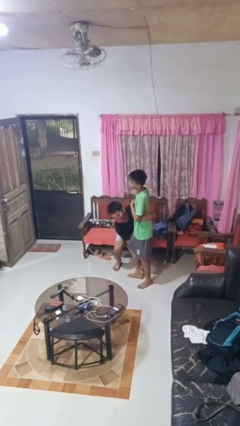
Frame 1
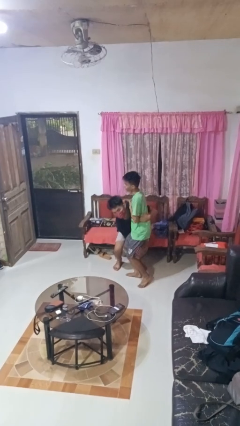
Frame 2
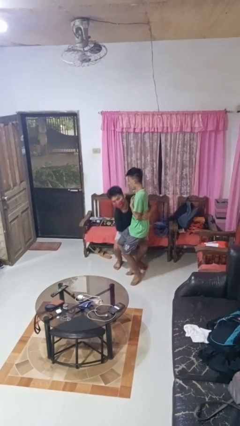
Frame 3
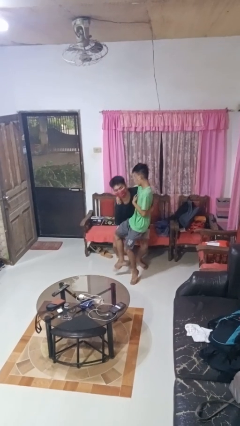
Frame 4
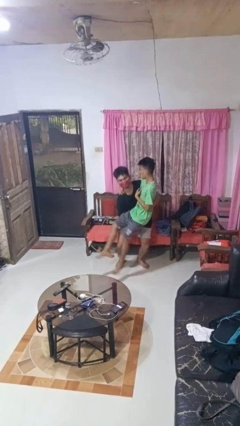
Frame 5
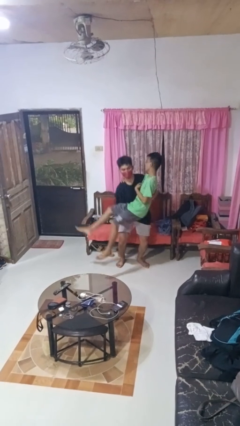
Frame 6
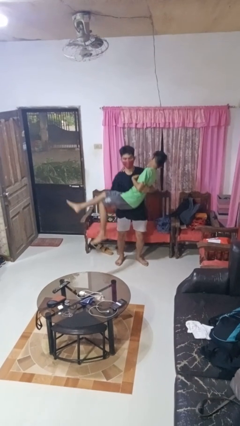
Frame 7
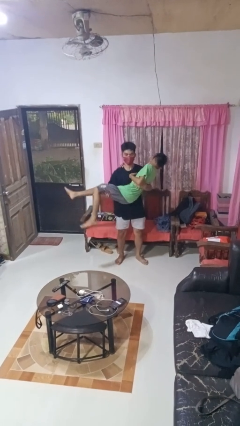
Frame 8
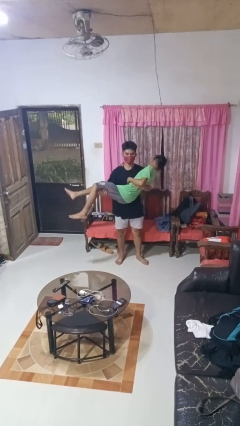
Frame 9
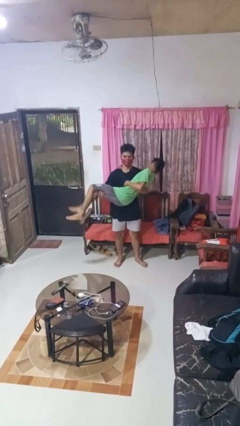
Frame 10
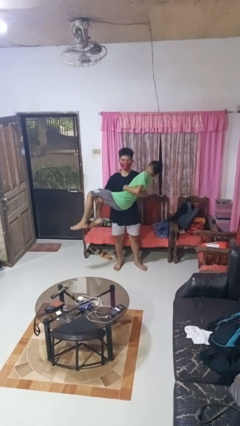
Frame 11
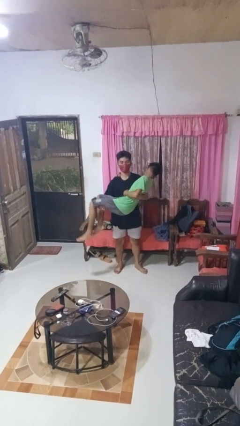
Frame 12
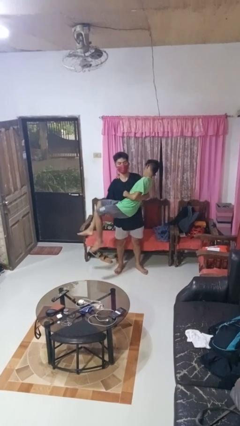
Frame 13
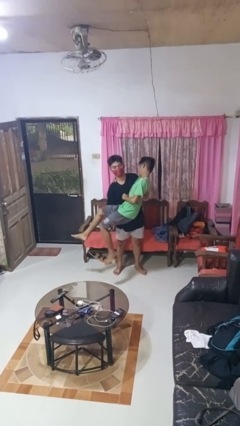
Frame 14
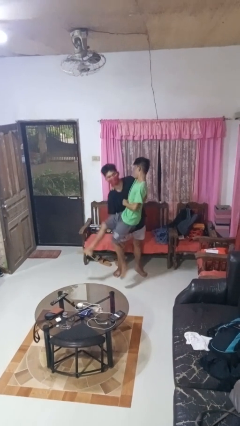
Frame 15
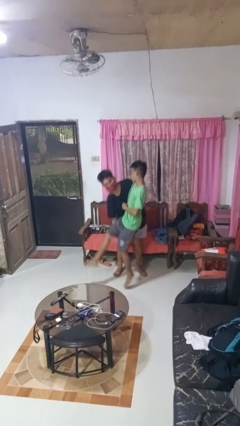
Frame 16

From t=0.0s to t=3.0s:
person carries person over shoulder

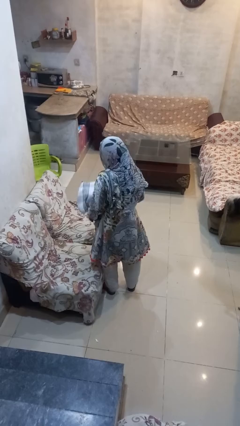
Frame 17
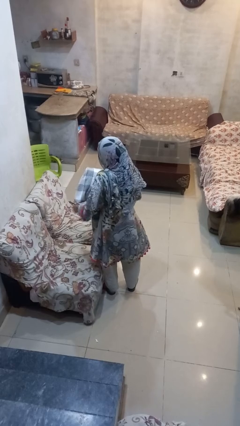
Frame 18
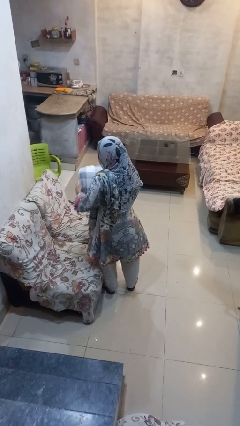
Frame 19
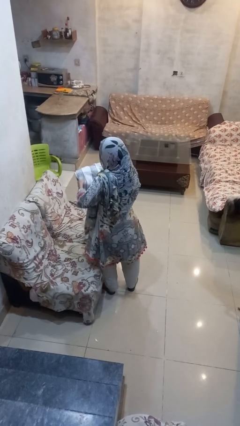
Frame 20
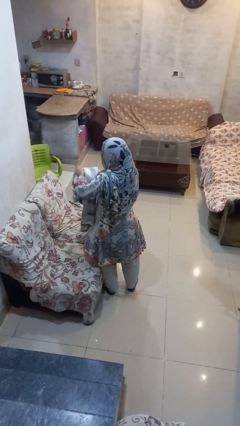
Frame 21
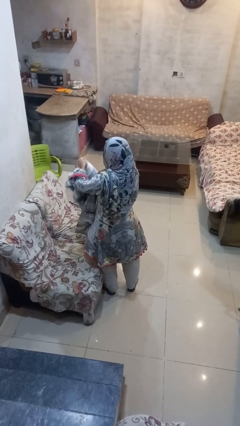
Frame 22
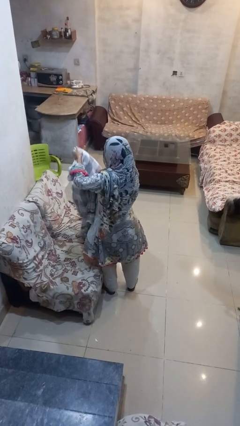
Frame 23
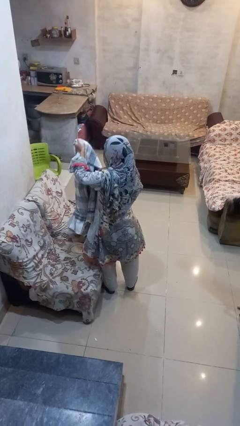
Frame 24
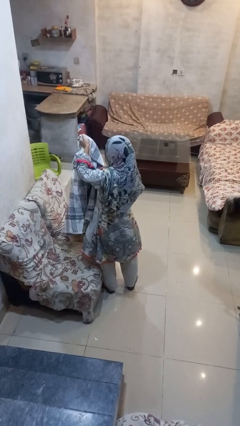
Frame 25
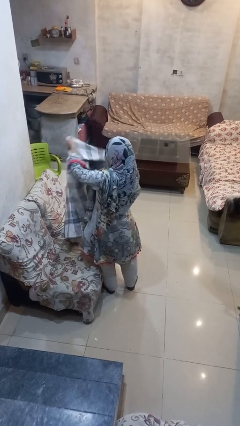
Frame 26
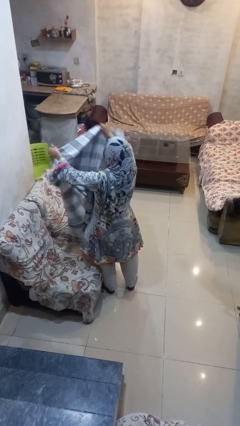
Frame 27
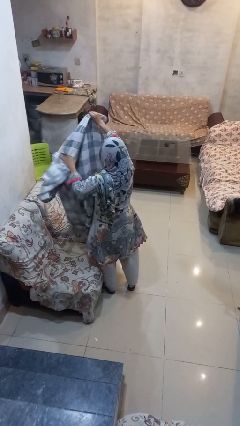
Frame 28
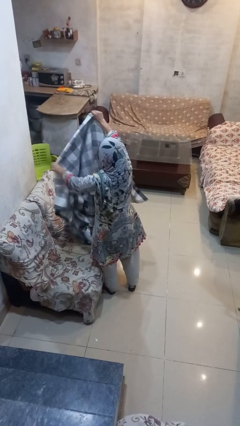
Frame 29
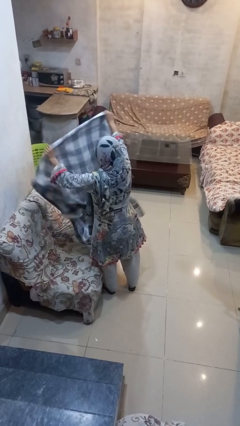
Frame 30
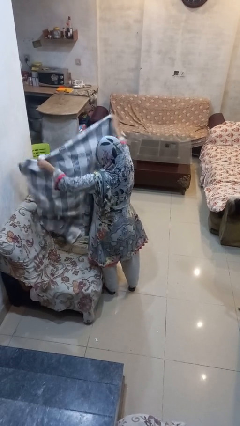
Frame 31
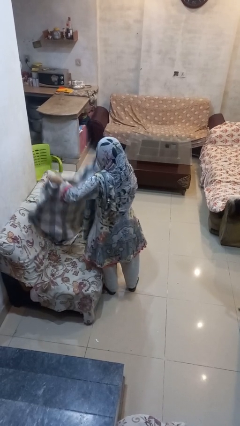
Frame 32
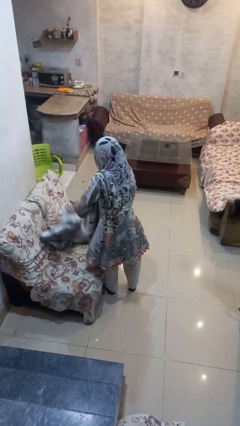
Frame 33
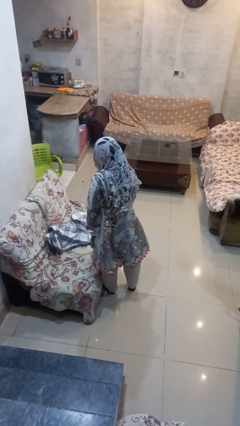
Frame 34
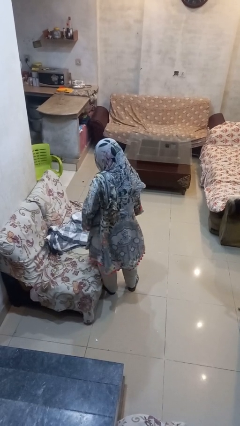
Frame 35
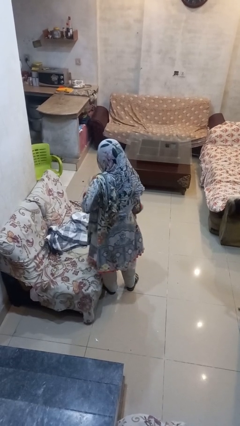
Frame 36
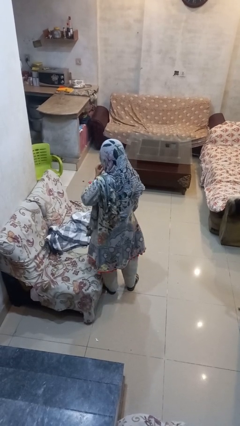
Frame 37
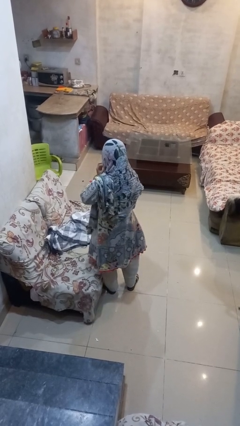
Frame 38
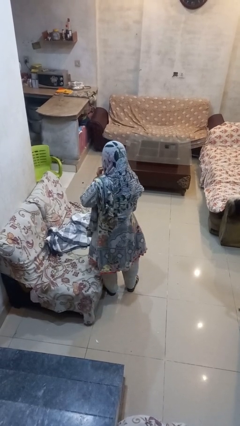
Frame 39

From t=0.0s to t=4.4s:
person unfolds blanket

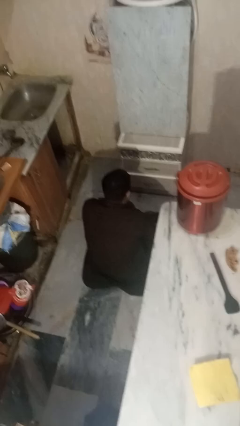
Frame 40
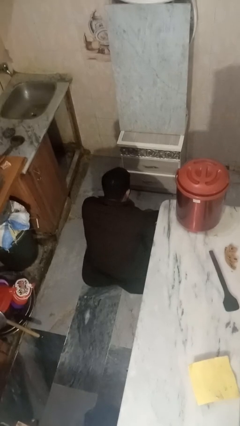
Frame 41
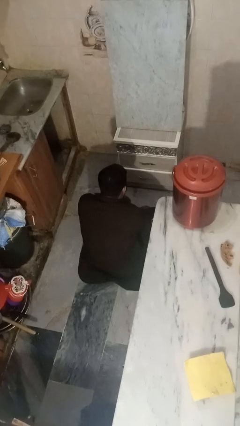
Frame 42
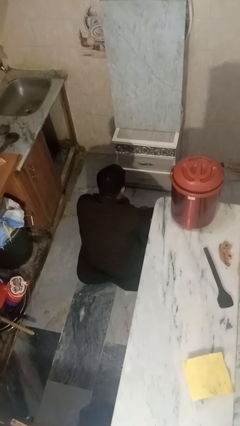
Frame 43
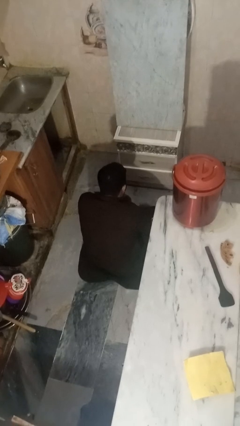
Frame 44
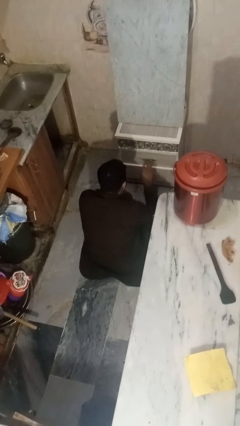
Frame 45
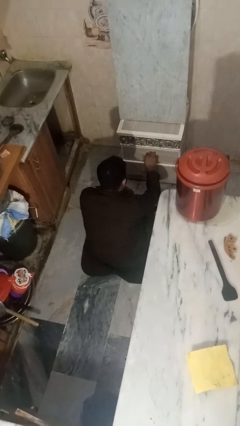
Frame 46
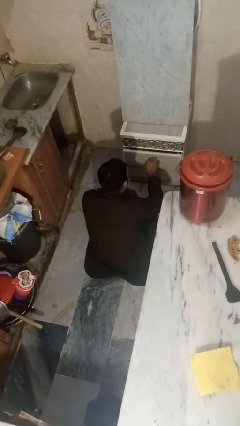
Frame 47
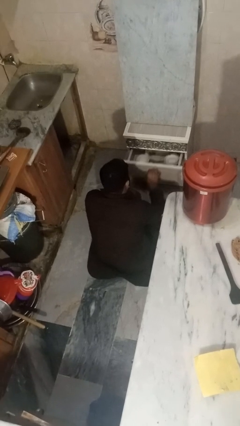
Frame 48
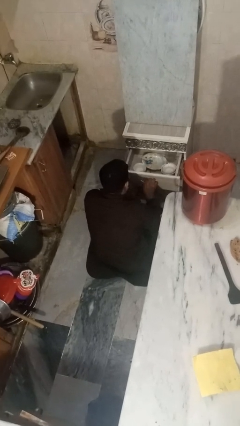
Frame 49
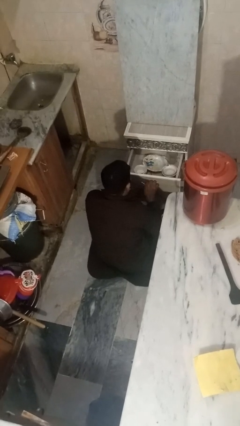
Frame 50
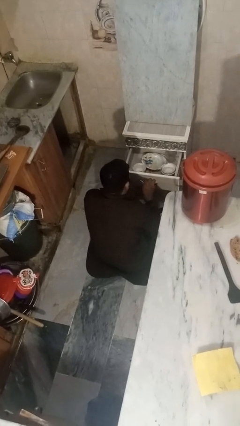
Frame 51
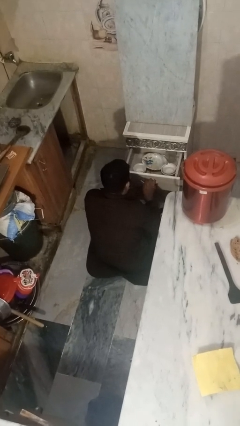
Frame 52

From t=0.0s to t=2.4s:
person opens kitchen drawer

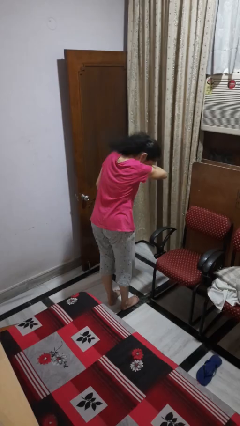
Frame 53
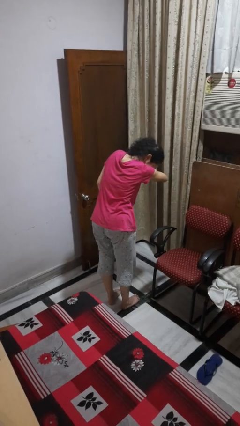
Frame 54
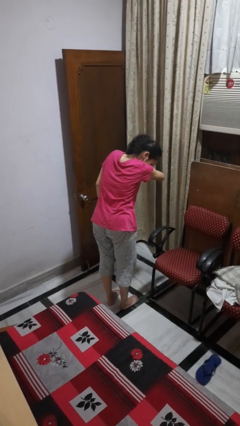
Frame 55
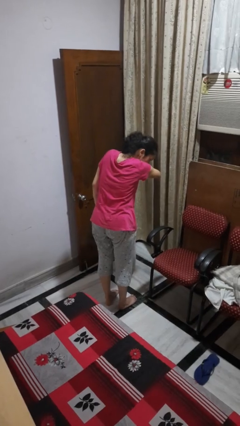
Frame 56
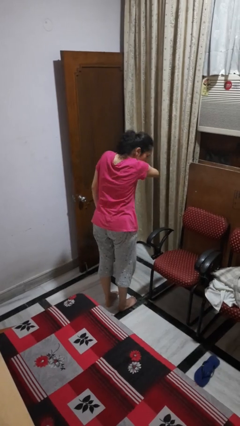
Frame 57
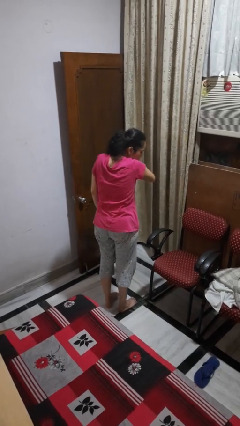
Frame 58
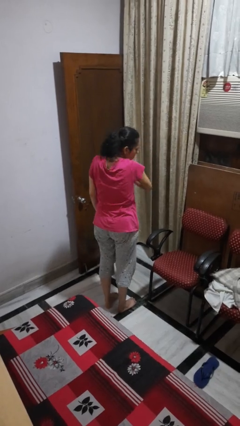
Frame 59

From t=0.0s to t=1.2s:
person sneezes into arm

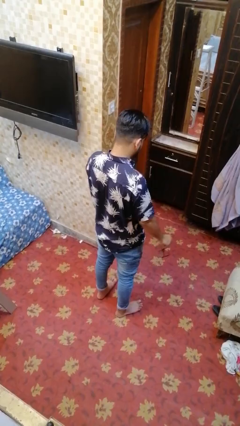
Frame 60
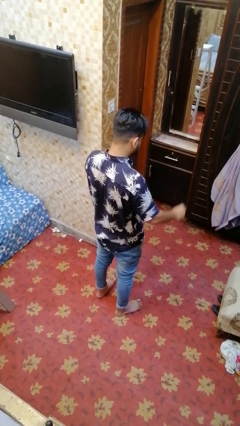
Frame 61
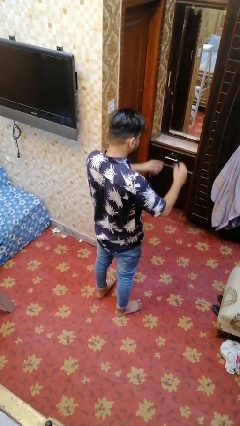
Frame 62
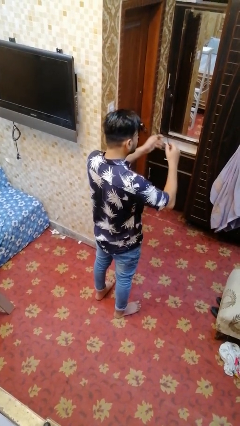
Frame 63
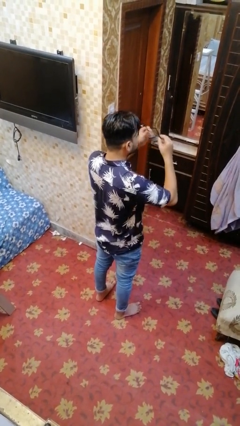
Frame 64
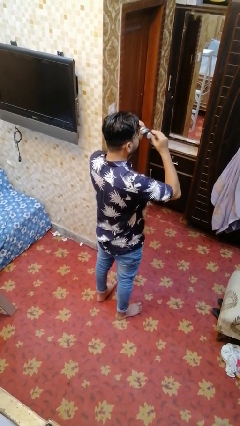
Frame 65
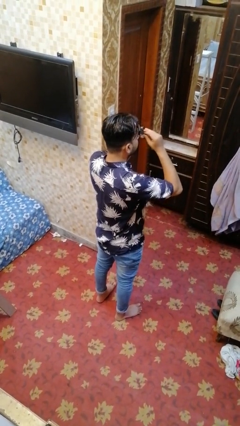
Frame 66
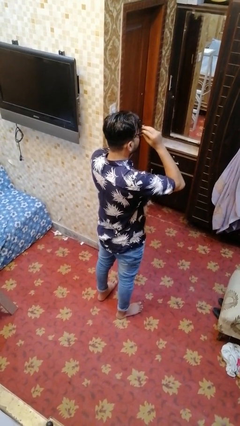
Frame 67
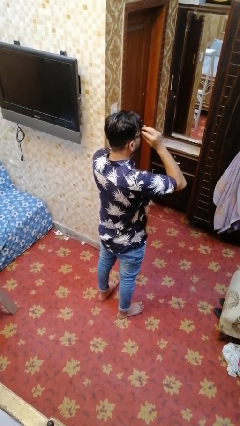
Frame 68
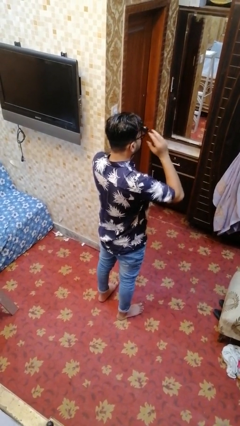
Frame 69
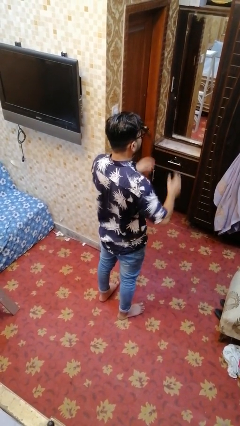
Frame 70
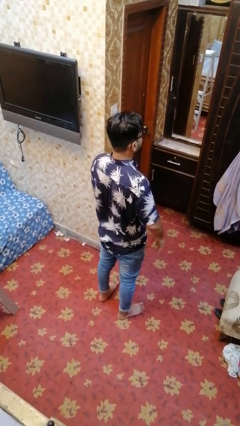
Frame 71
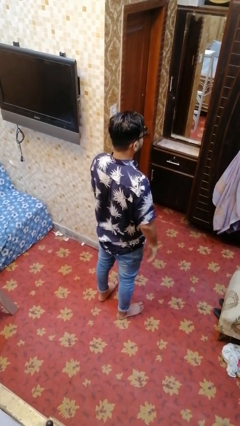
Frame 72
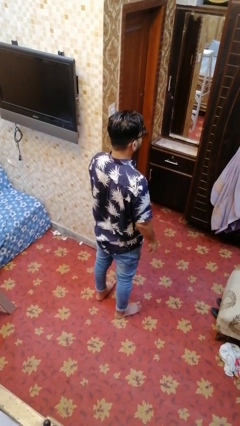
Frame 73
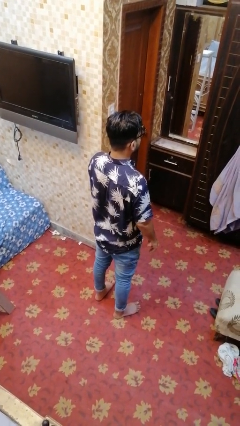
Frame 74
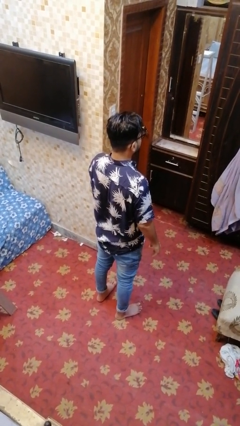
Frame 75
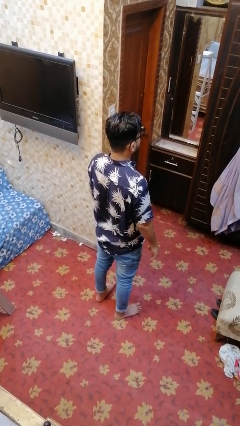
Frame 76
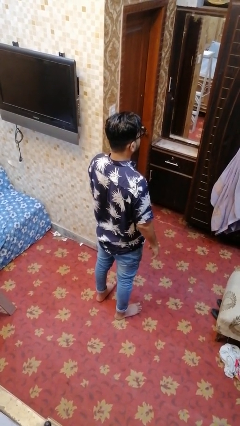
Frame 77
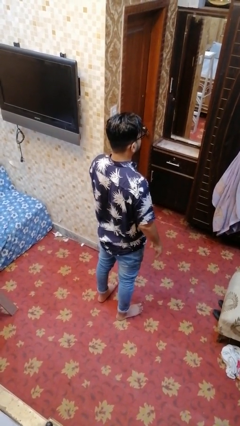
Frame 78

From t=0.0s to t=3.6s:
person puts on glasses

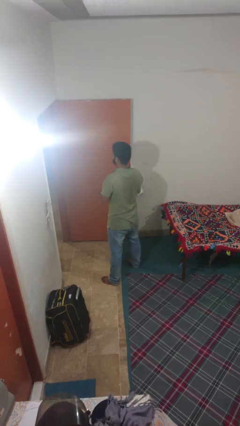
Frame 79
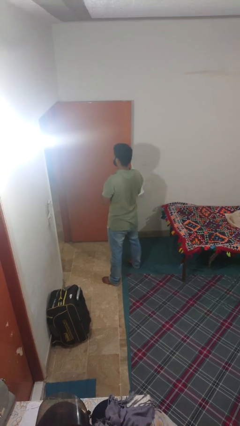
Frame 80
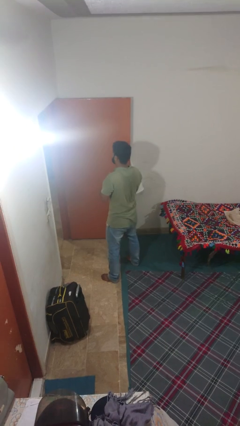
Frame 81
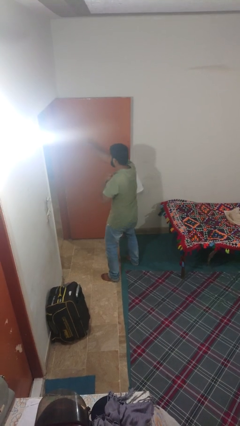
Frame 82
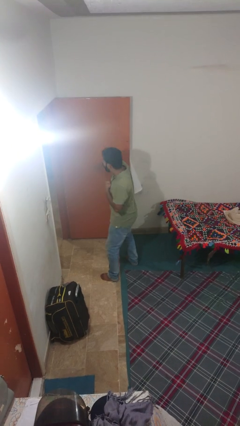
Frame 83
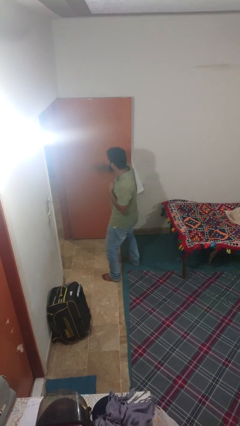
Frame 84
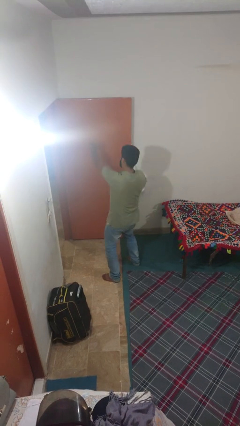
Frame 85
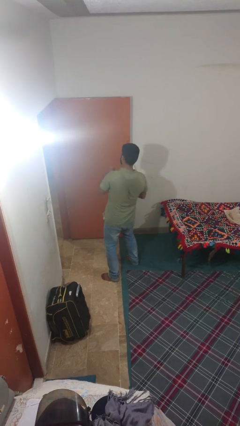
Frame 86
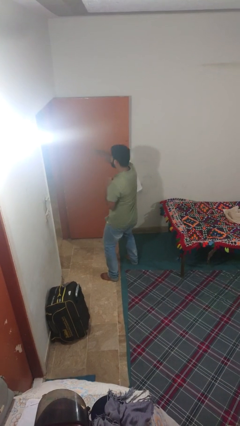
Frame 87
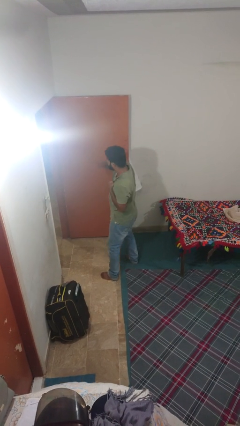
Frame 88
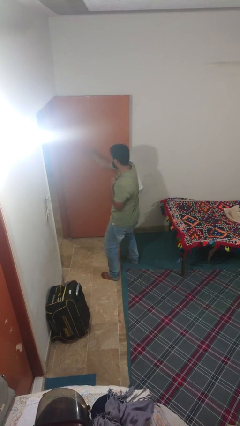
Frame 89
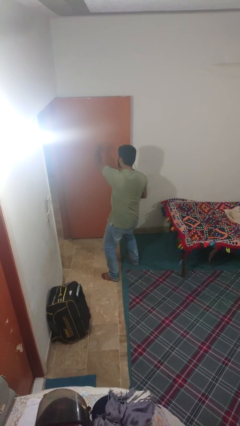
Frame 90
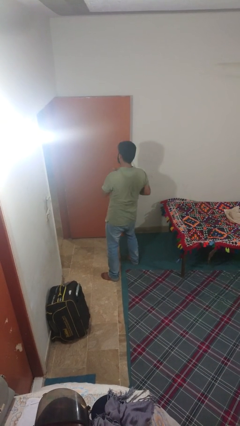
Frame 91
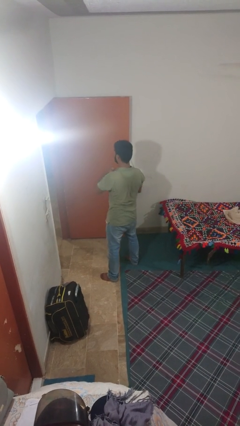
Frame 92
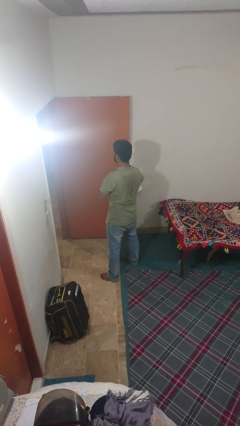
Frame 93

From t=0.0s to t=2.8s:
person punches
